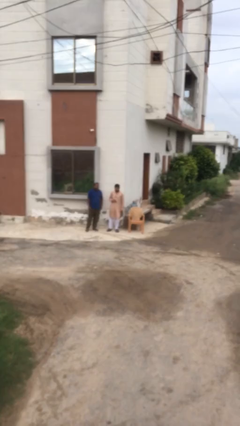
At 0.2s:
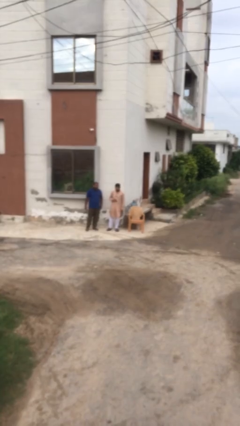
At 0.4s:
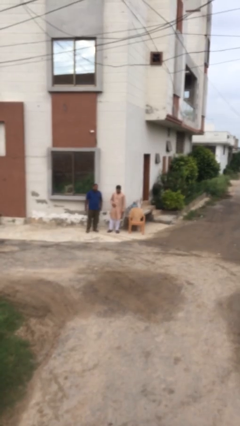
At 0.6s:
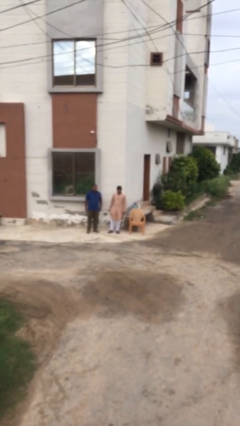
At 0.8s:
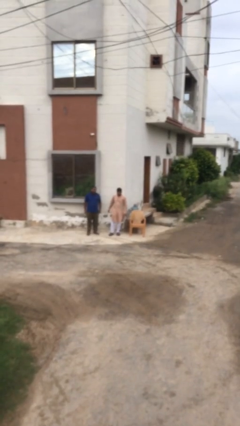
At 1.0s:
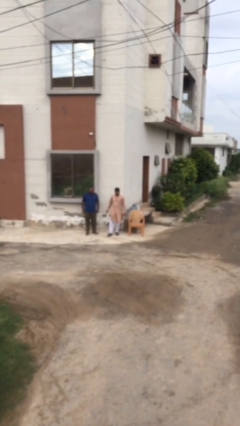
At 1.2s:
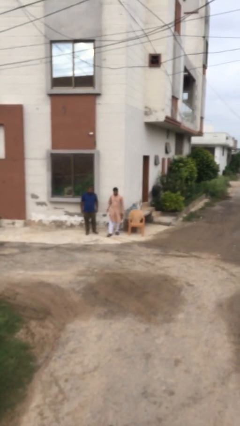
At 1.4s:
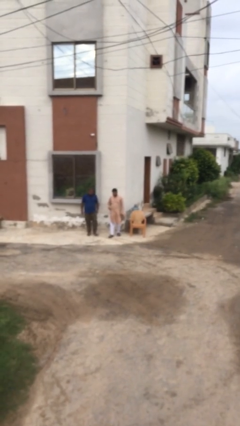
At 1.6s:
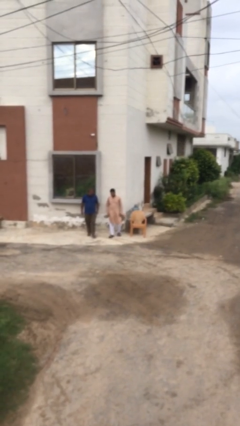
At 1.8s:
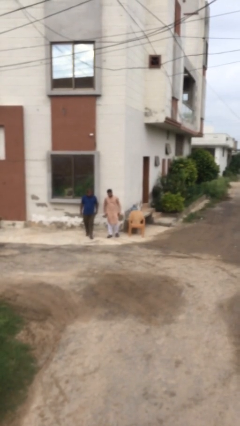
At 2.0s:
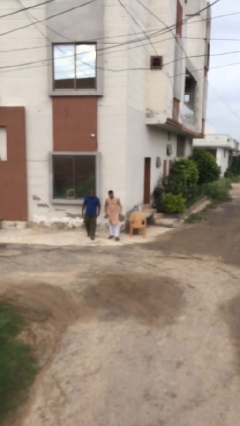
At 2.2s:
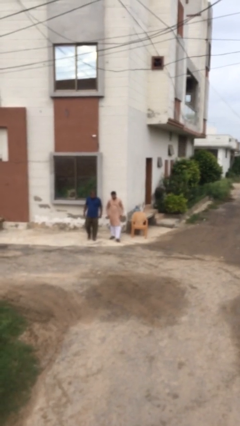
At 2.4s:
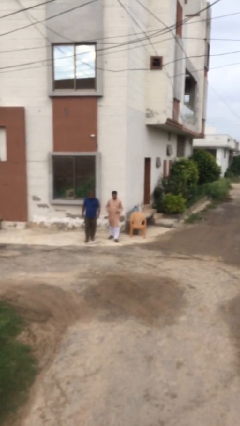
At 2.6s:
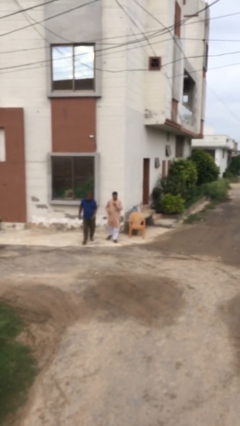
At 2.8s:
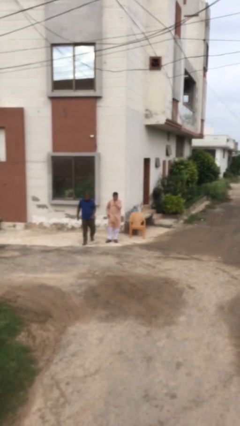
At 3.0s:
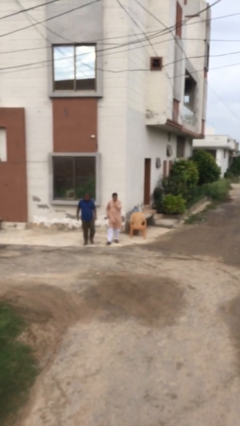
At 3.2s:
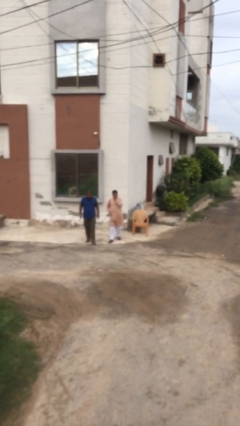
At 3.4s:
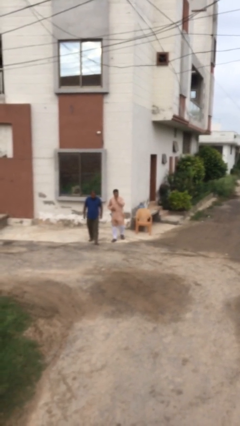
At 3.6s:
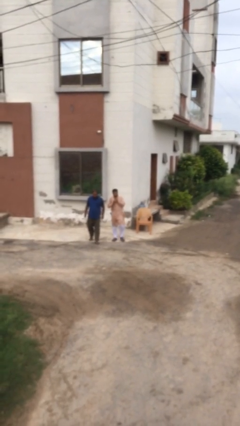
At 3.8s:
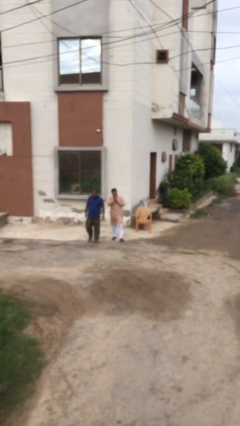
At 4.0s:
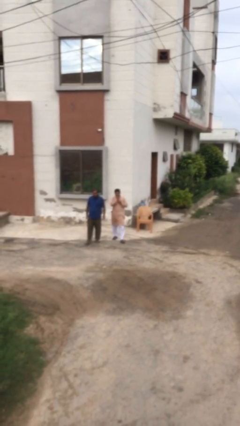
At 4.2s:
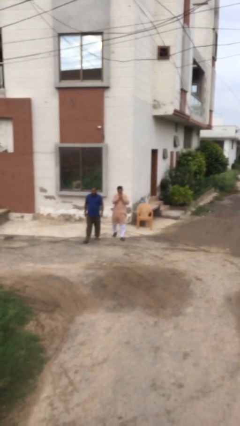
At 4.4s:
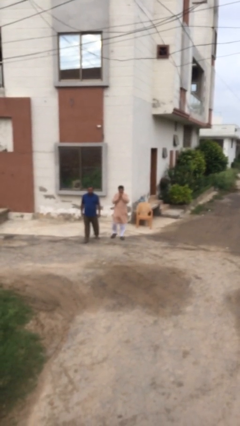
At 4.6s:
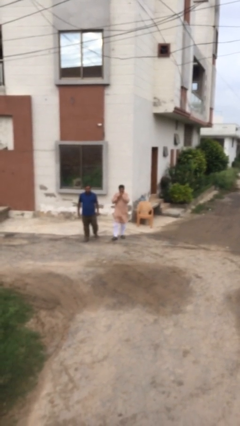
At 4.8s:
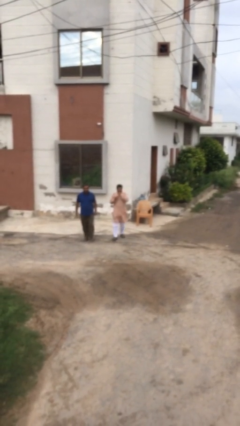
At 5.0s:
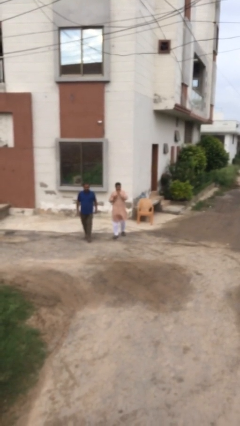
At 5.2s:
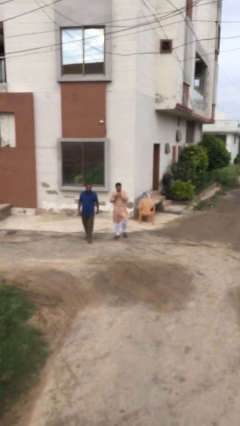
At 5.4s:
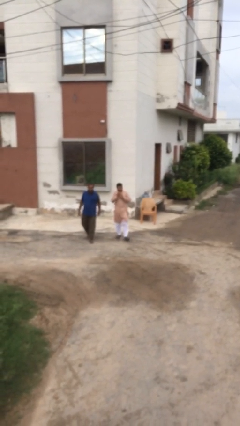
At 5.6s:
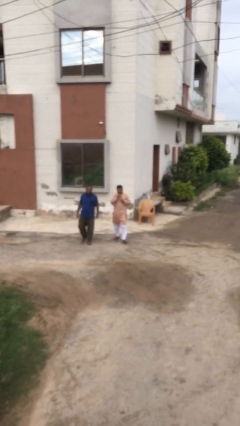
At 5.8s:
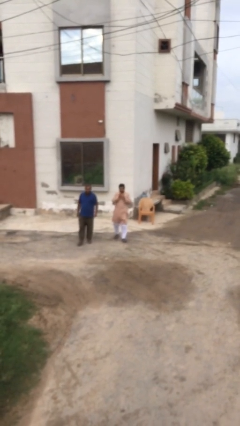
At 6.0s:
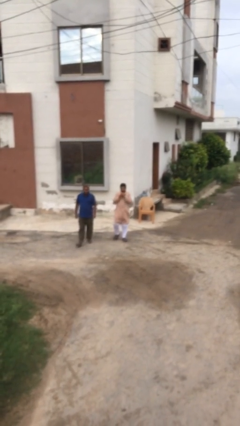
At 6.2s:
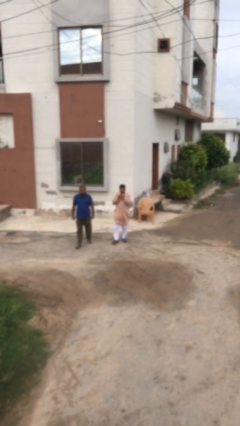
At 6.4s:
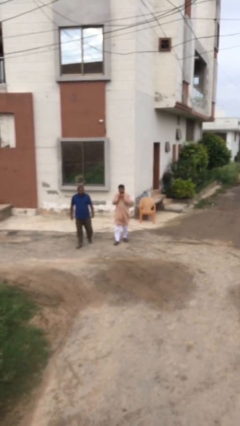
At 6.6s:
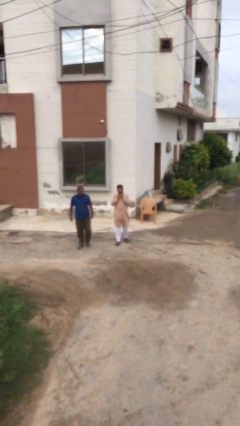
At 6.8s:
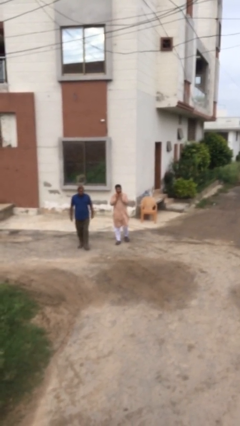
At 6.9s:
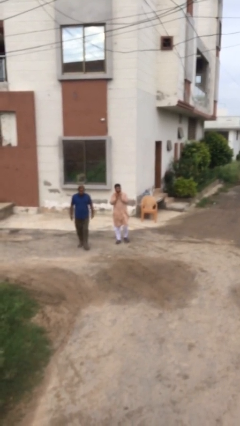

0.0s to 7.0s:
person talks to person

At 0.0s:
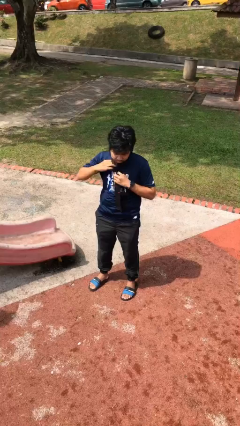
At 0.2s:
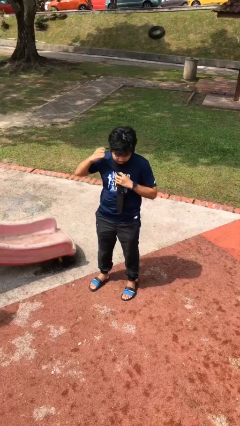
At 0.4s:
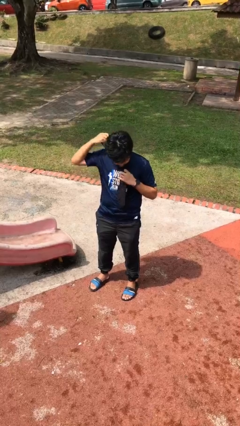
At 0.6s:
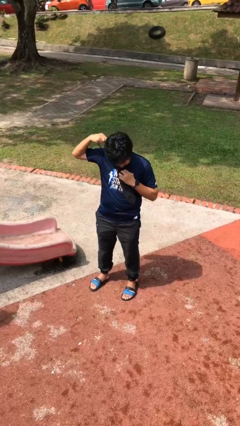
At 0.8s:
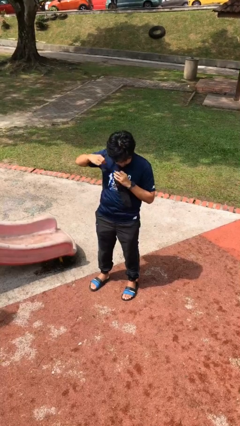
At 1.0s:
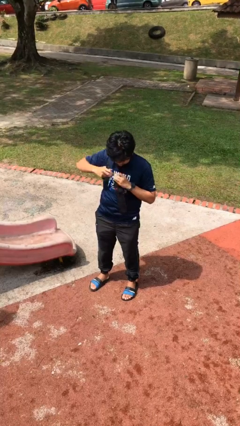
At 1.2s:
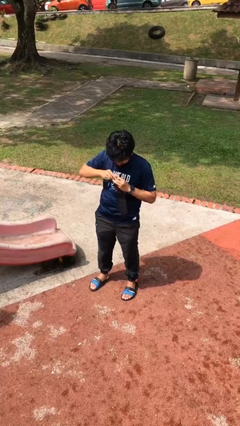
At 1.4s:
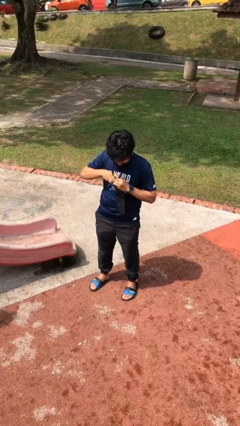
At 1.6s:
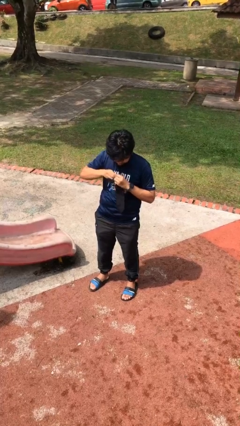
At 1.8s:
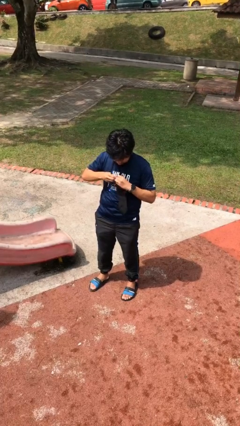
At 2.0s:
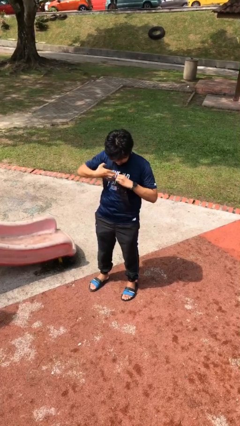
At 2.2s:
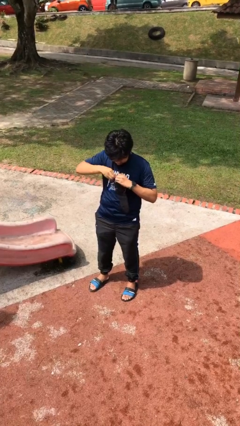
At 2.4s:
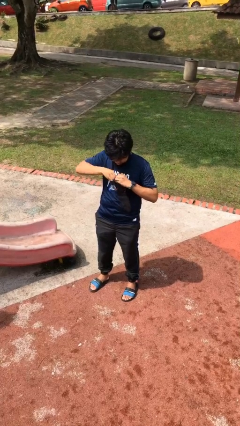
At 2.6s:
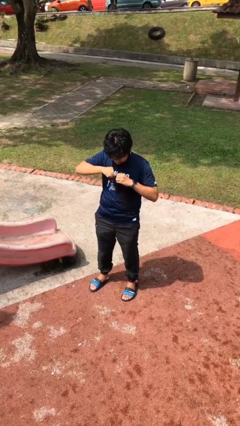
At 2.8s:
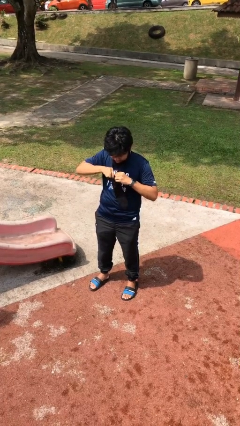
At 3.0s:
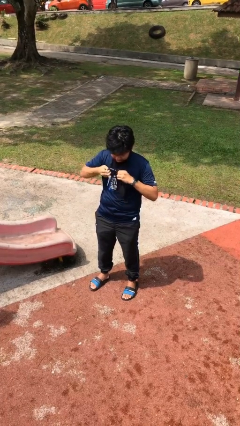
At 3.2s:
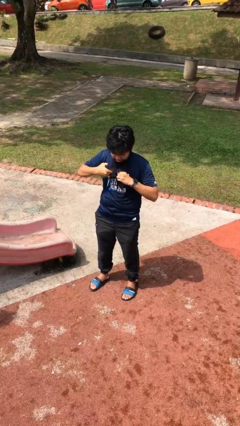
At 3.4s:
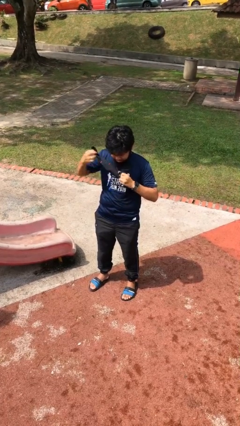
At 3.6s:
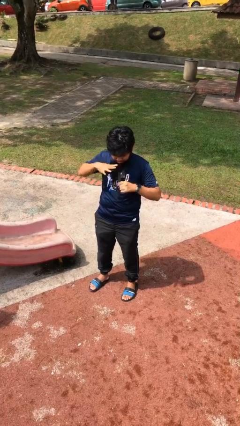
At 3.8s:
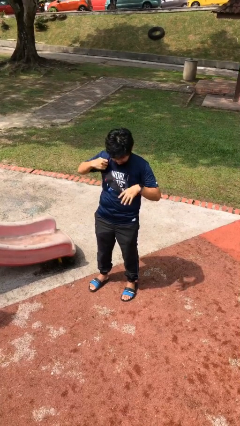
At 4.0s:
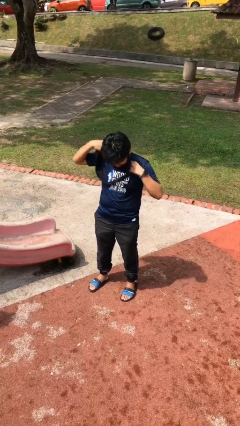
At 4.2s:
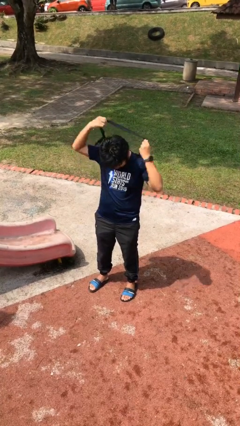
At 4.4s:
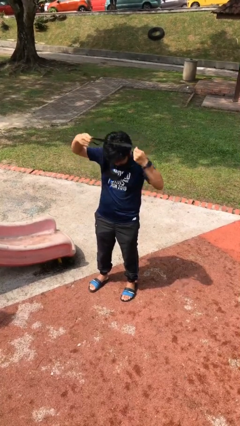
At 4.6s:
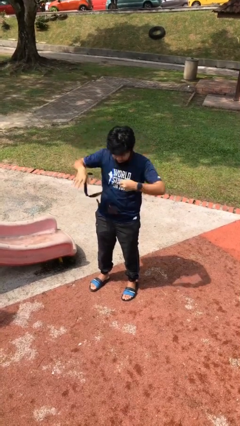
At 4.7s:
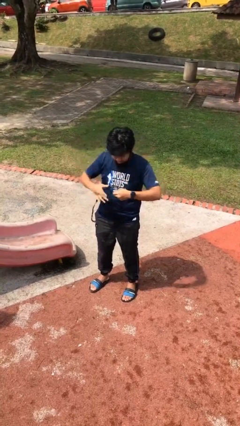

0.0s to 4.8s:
person takes off necktie

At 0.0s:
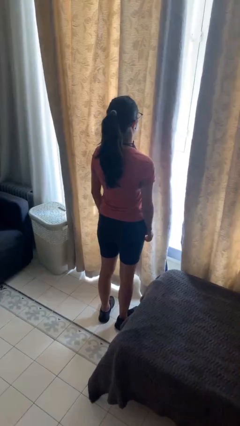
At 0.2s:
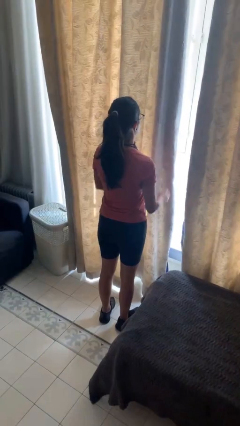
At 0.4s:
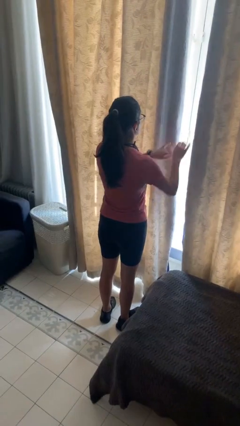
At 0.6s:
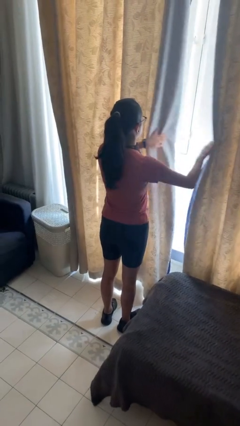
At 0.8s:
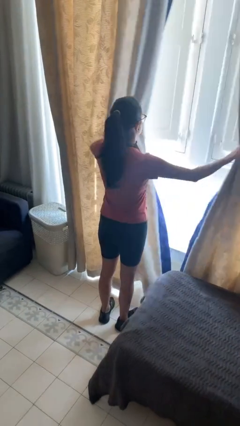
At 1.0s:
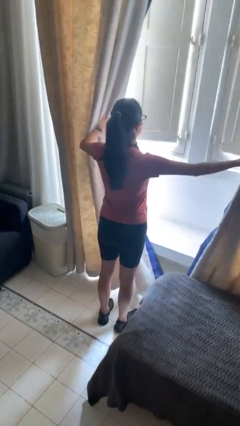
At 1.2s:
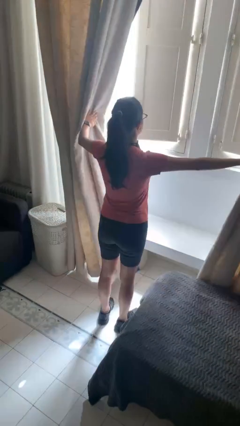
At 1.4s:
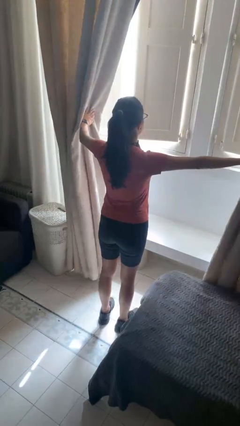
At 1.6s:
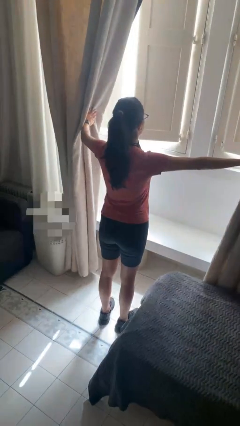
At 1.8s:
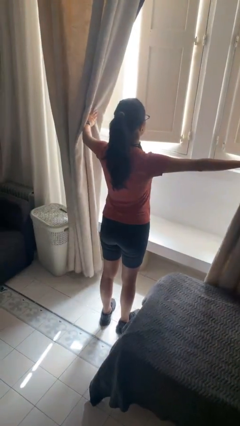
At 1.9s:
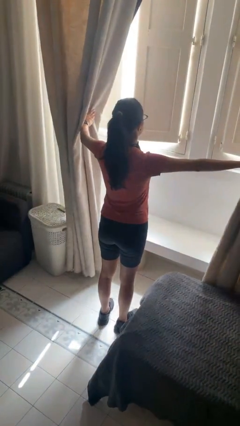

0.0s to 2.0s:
person opens curtains

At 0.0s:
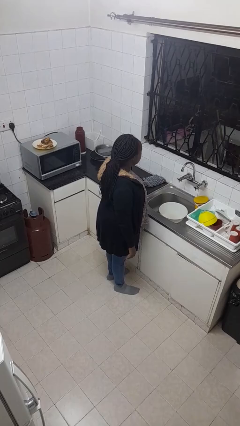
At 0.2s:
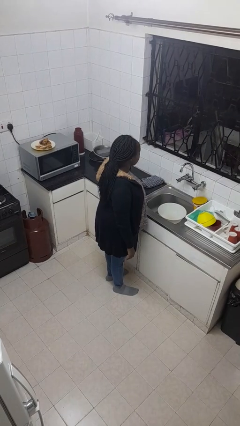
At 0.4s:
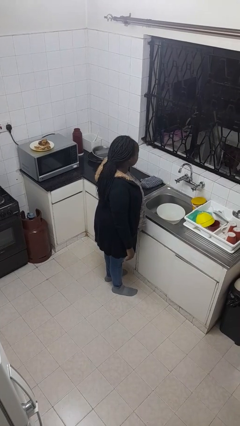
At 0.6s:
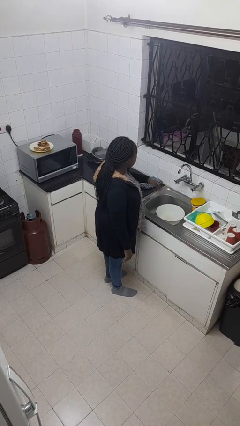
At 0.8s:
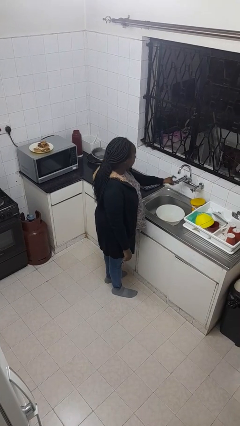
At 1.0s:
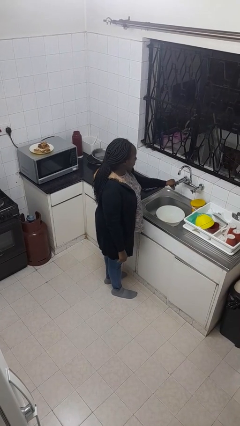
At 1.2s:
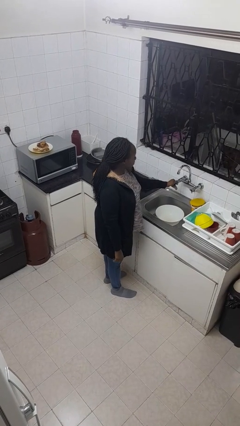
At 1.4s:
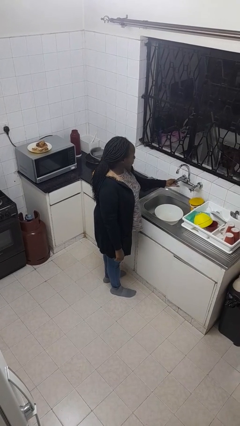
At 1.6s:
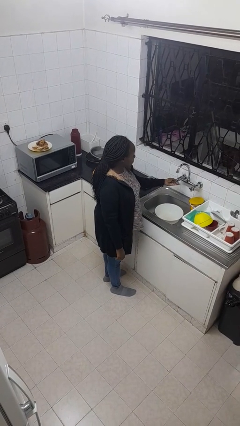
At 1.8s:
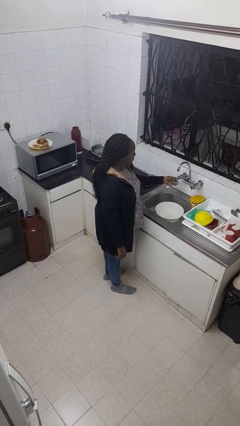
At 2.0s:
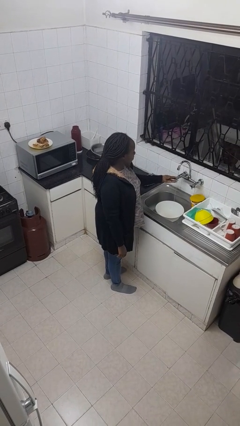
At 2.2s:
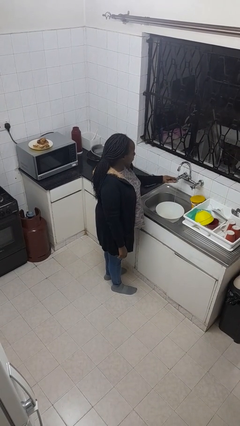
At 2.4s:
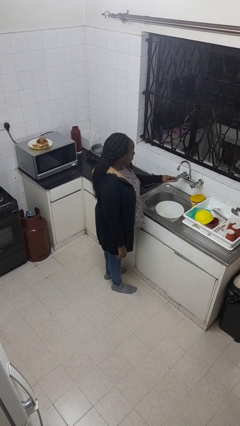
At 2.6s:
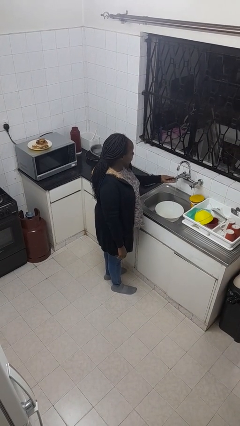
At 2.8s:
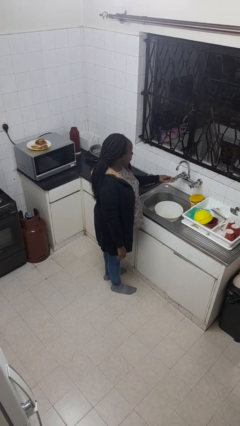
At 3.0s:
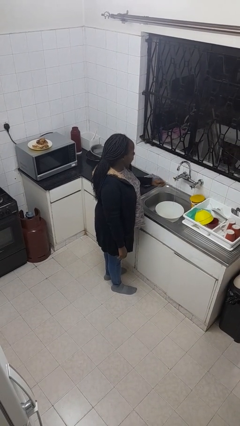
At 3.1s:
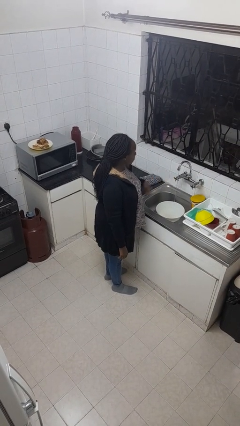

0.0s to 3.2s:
person turns on faucet

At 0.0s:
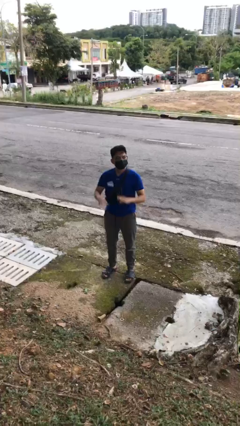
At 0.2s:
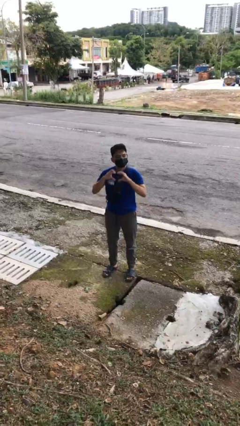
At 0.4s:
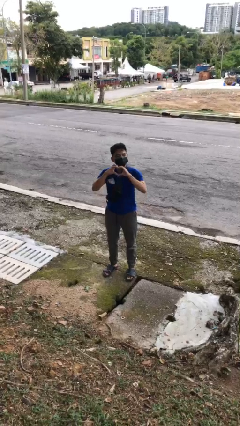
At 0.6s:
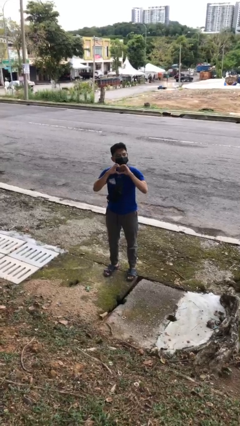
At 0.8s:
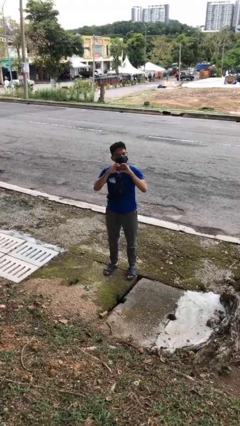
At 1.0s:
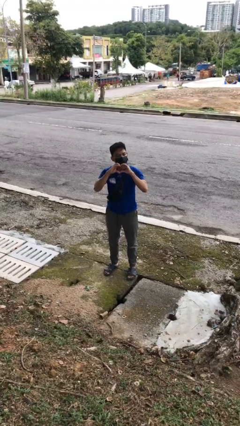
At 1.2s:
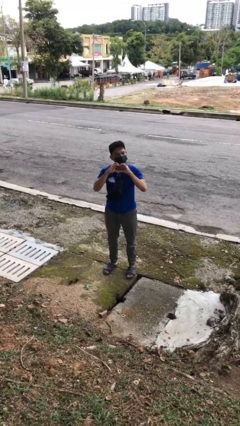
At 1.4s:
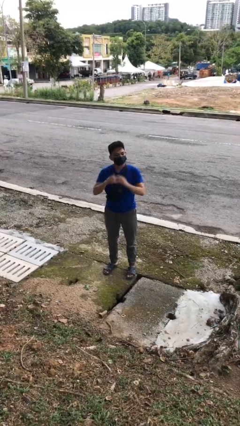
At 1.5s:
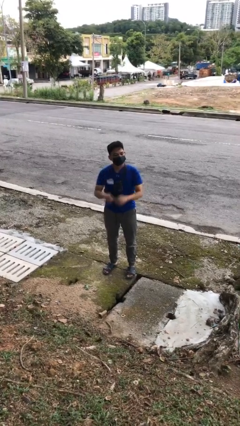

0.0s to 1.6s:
person gestures heart
